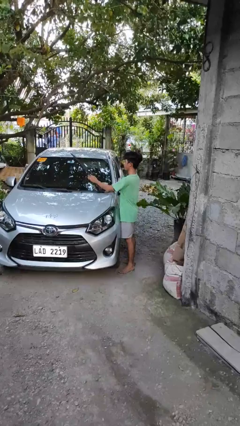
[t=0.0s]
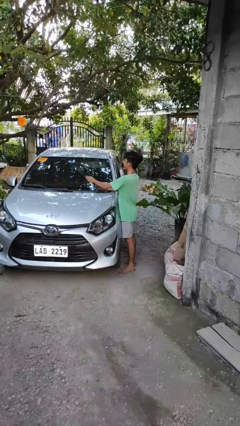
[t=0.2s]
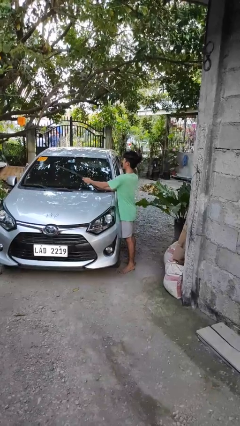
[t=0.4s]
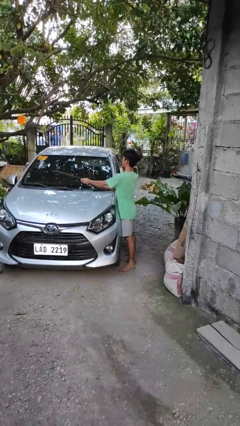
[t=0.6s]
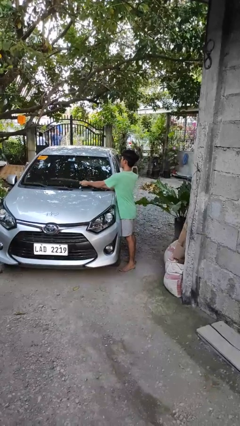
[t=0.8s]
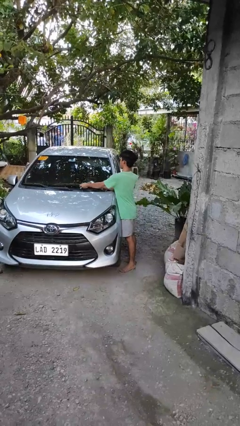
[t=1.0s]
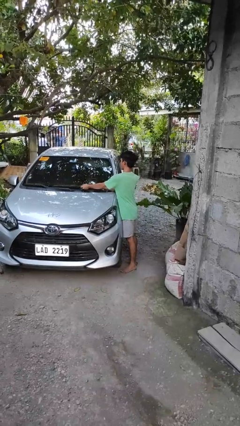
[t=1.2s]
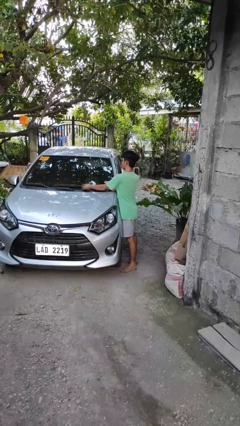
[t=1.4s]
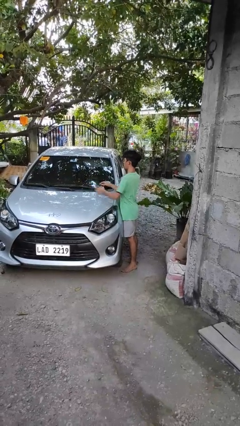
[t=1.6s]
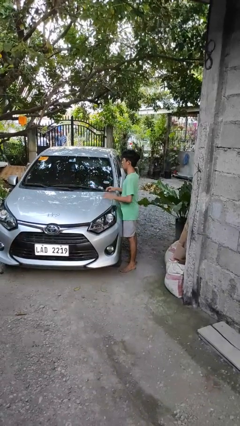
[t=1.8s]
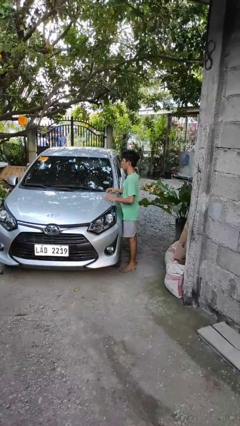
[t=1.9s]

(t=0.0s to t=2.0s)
person flips down car wipers

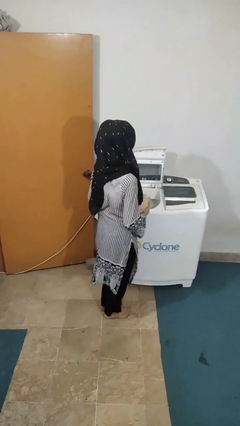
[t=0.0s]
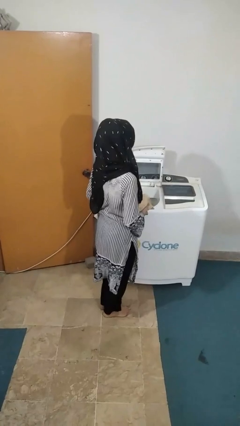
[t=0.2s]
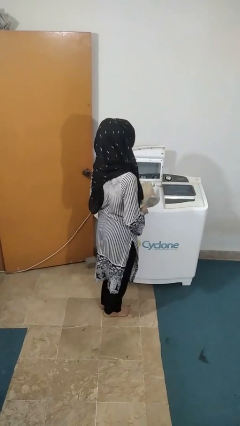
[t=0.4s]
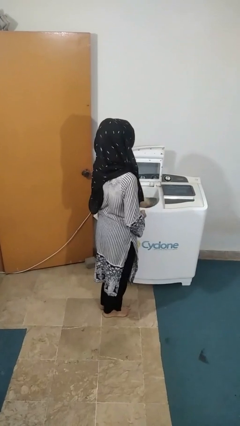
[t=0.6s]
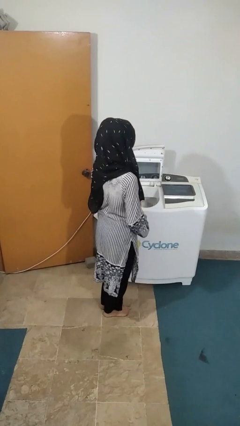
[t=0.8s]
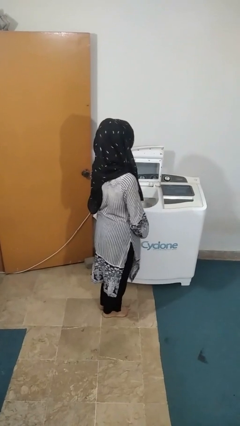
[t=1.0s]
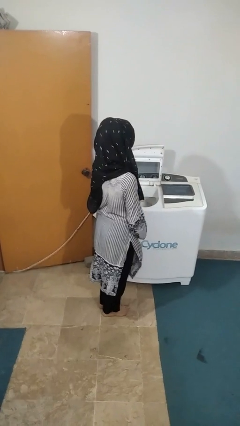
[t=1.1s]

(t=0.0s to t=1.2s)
person loads clotheswasher

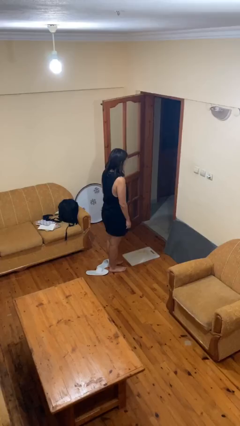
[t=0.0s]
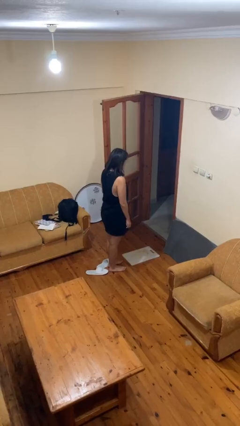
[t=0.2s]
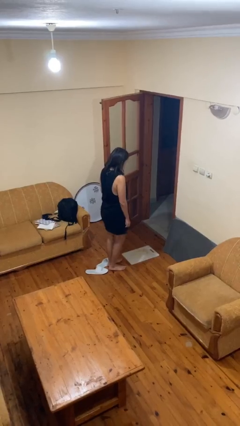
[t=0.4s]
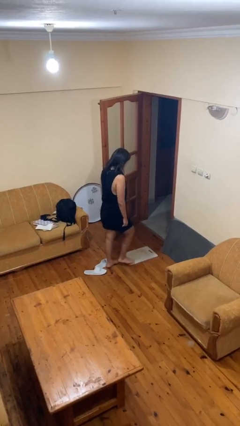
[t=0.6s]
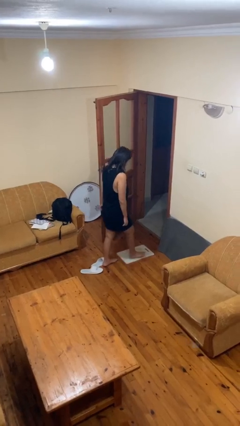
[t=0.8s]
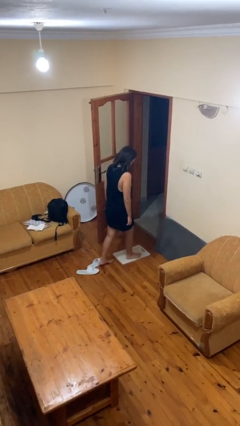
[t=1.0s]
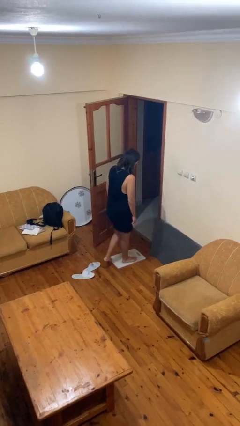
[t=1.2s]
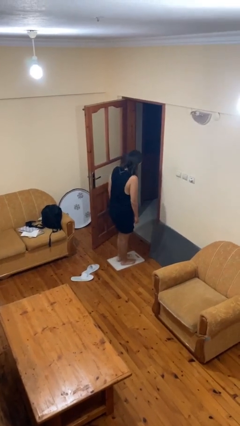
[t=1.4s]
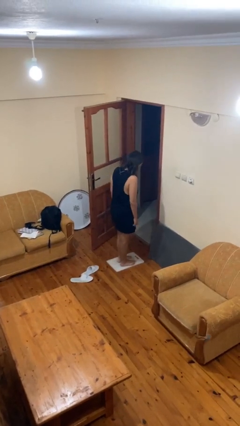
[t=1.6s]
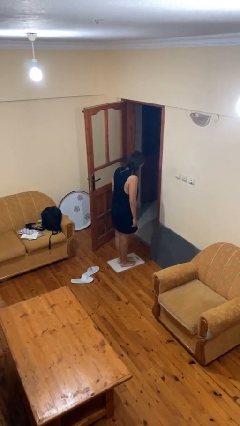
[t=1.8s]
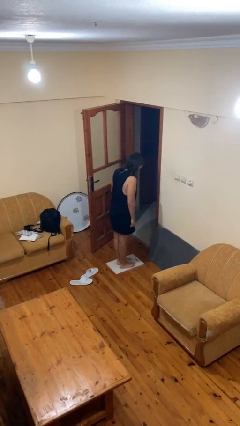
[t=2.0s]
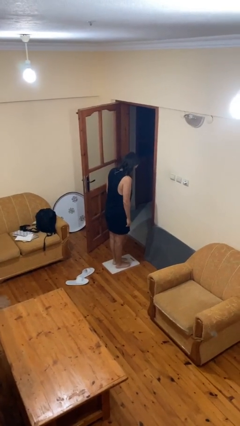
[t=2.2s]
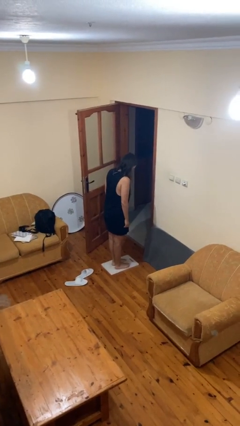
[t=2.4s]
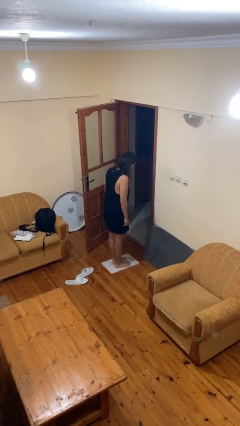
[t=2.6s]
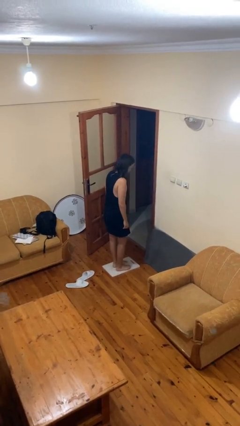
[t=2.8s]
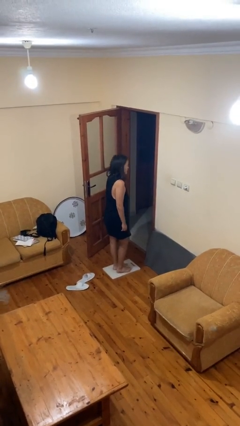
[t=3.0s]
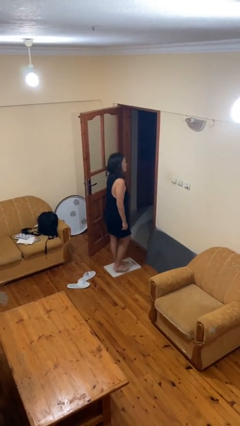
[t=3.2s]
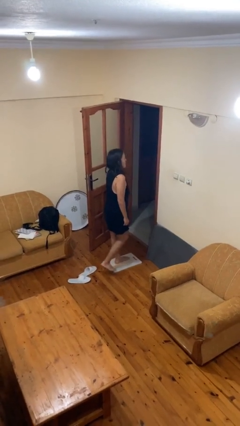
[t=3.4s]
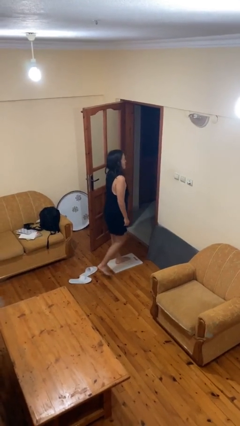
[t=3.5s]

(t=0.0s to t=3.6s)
person uses bodyweight scale

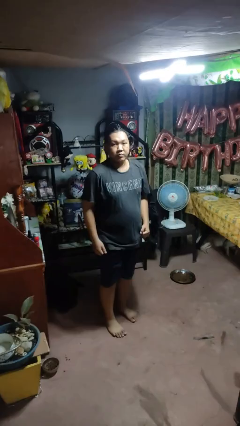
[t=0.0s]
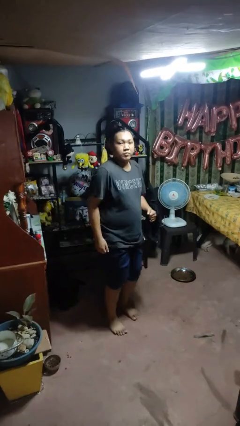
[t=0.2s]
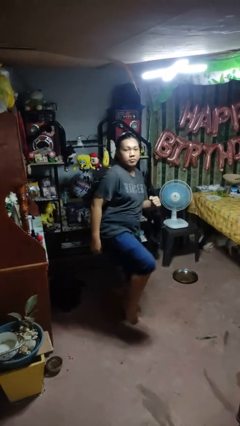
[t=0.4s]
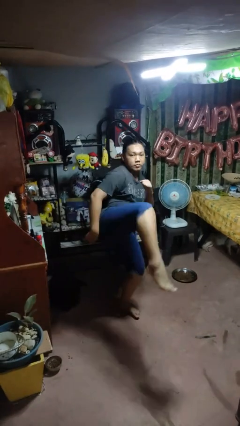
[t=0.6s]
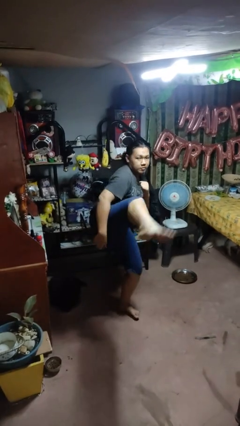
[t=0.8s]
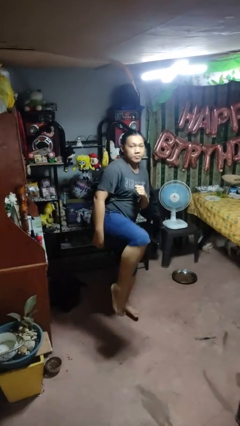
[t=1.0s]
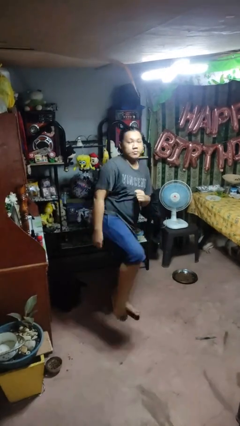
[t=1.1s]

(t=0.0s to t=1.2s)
person karate kicks

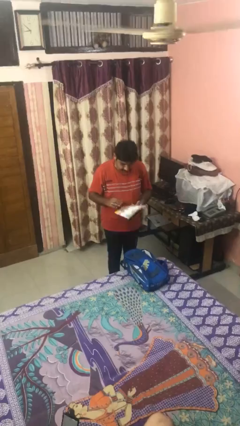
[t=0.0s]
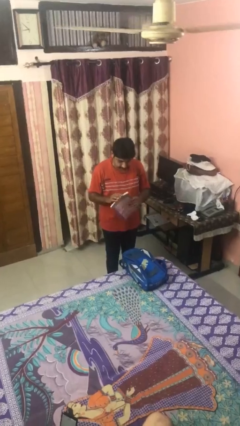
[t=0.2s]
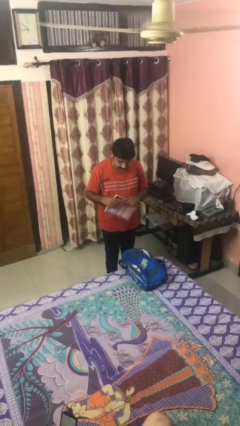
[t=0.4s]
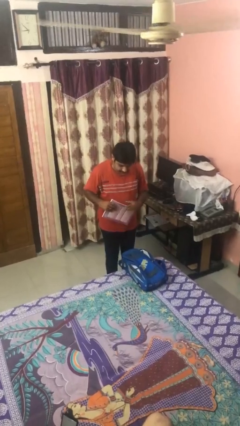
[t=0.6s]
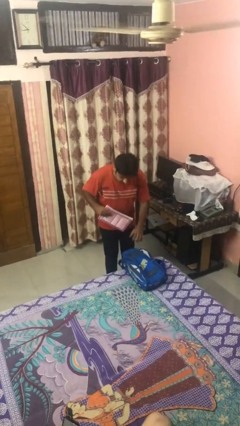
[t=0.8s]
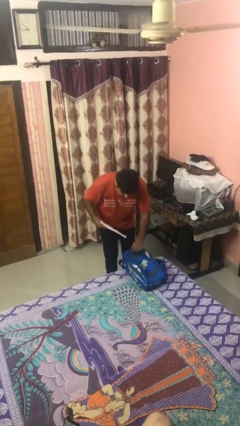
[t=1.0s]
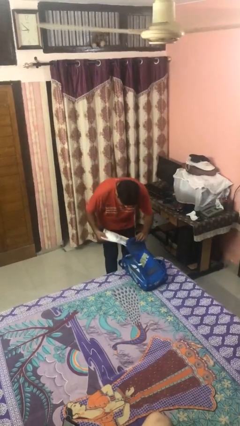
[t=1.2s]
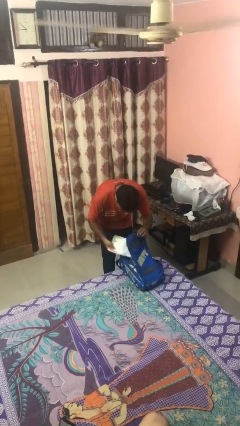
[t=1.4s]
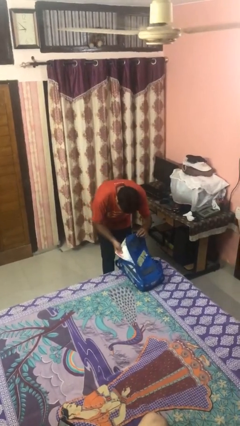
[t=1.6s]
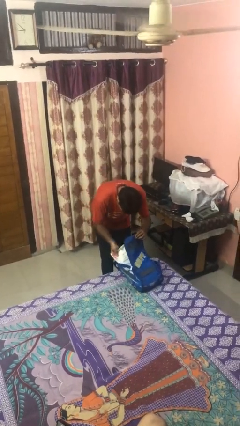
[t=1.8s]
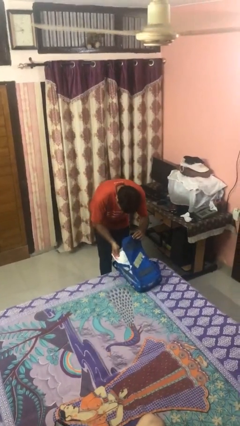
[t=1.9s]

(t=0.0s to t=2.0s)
person puts object into backpack

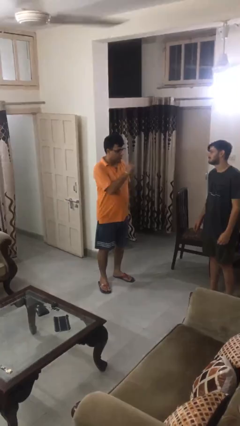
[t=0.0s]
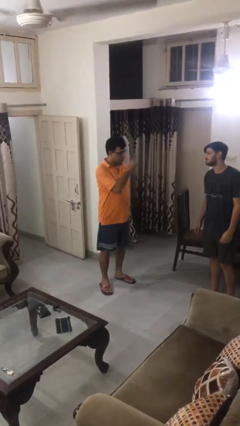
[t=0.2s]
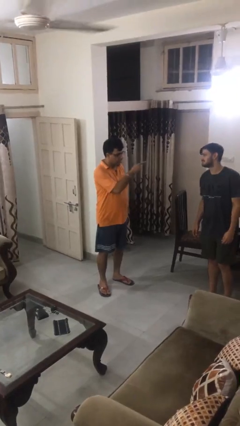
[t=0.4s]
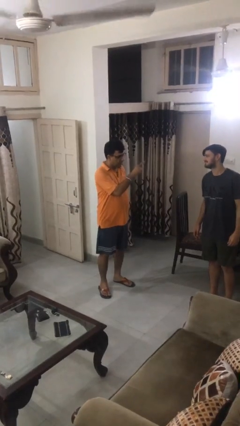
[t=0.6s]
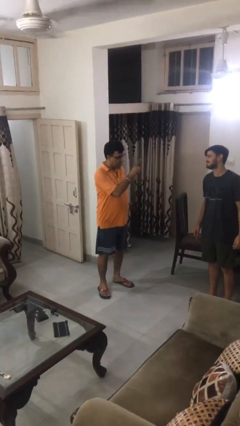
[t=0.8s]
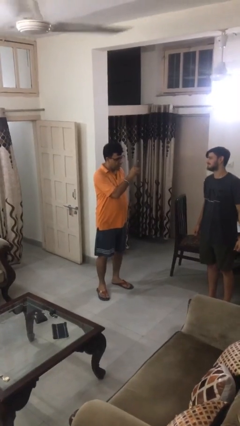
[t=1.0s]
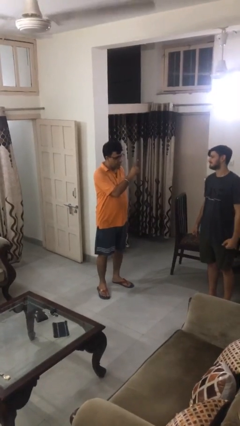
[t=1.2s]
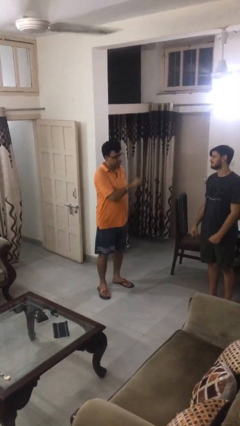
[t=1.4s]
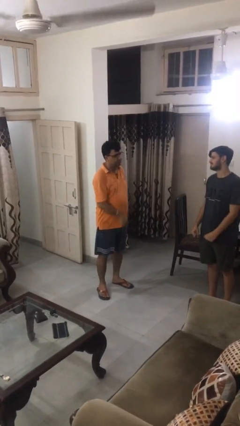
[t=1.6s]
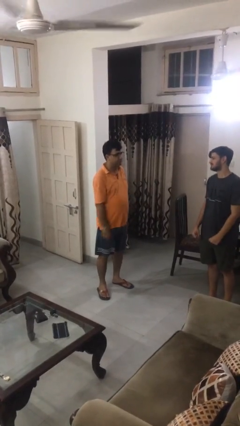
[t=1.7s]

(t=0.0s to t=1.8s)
person points at person

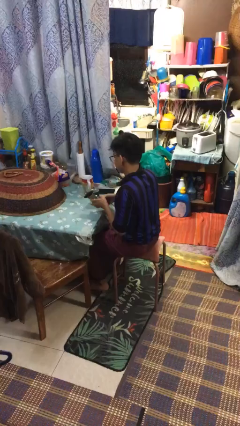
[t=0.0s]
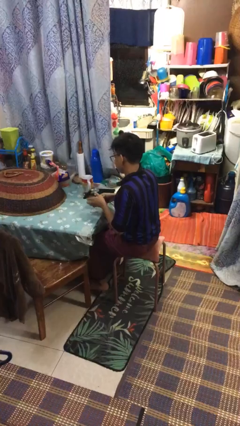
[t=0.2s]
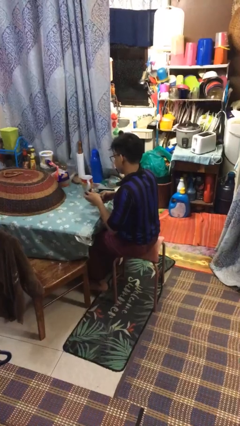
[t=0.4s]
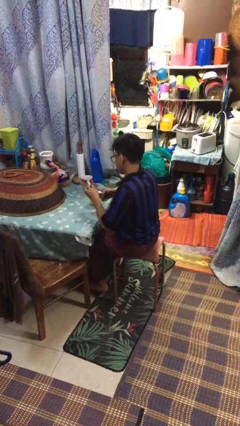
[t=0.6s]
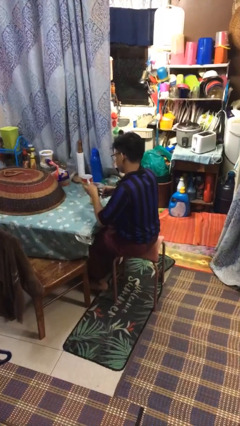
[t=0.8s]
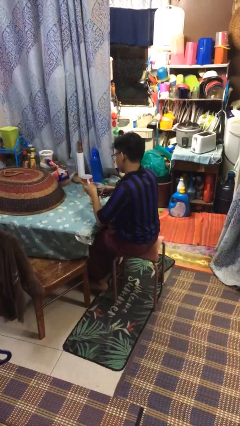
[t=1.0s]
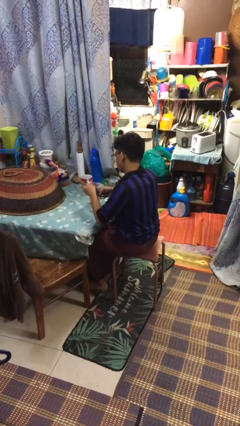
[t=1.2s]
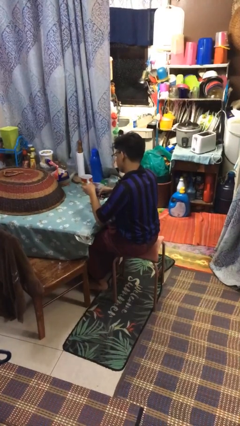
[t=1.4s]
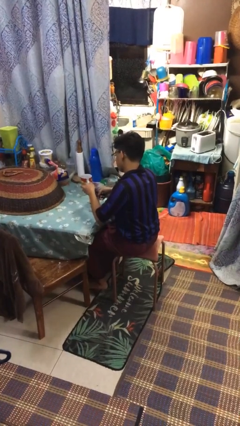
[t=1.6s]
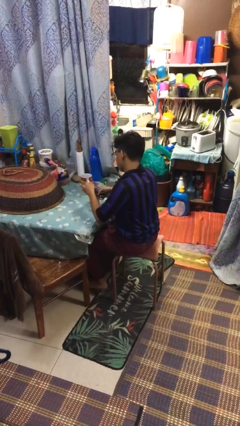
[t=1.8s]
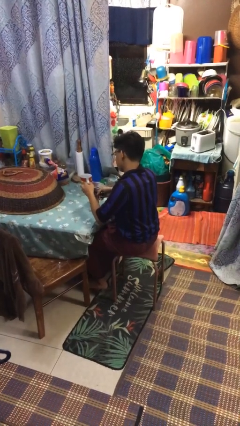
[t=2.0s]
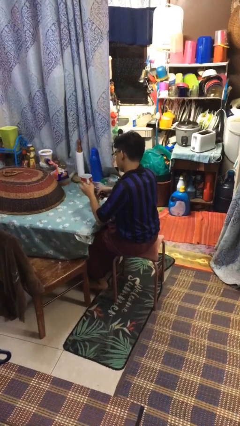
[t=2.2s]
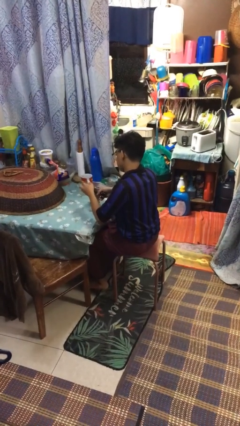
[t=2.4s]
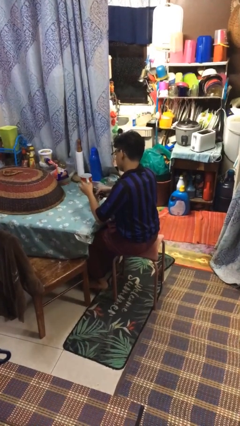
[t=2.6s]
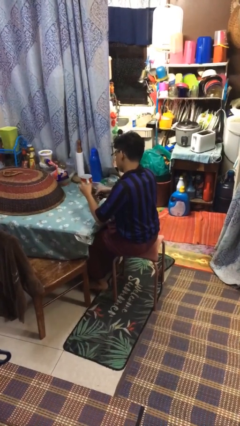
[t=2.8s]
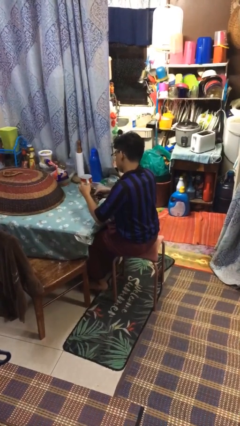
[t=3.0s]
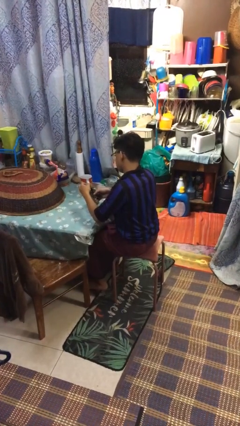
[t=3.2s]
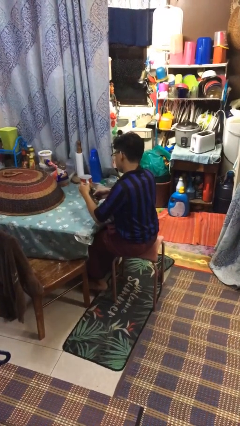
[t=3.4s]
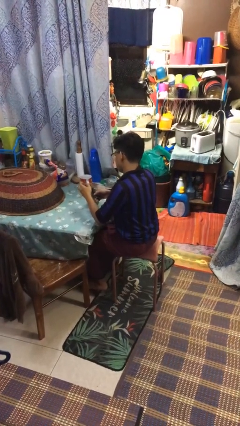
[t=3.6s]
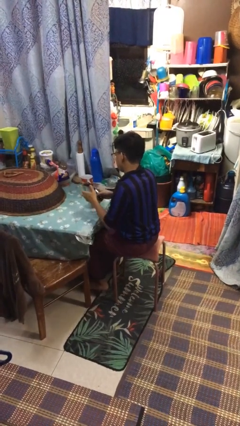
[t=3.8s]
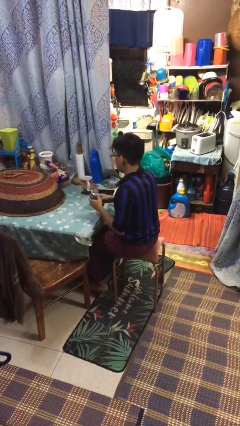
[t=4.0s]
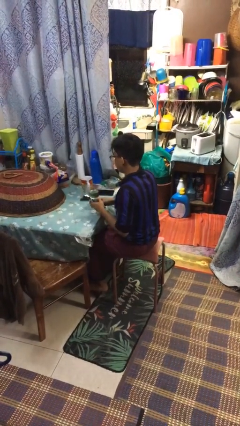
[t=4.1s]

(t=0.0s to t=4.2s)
person opens can with can opener

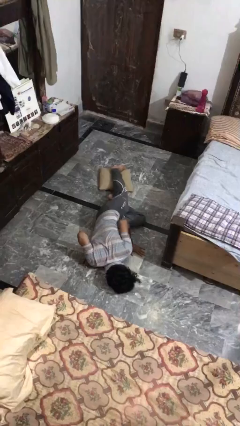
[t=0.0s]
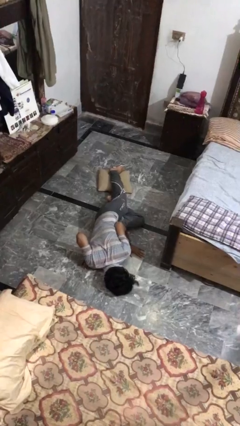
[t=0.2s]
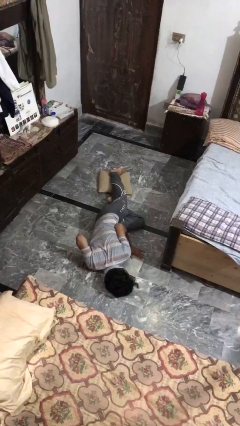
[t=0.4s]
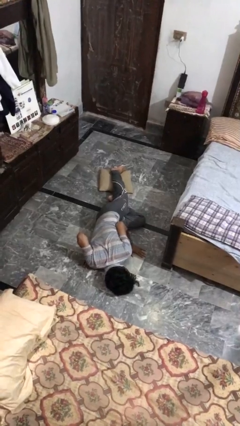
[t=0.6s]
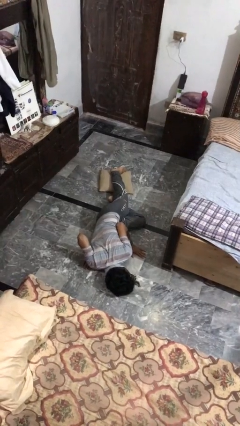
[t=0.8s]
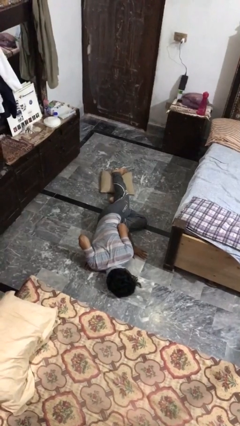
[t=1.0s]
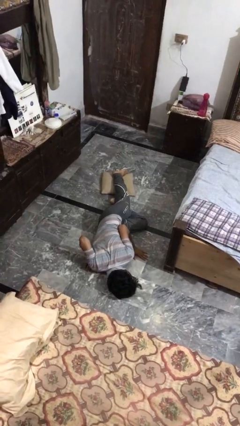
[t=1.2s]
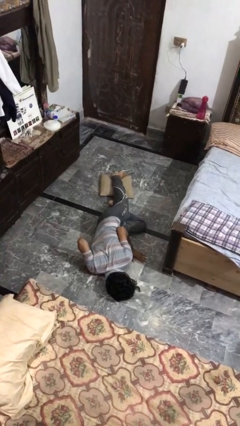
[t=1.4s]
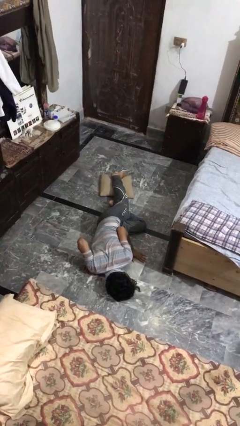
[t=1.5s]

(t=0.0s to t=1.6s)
person lies down on floor
